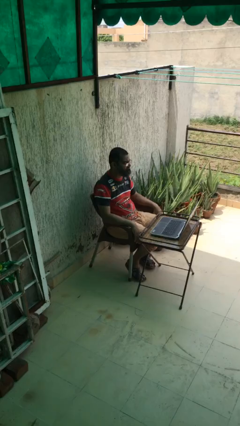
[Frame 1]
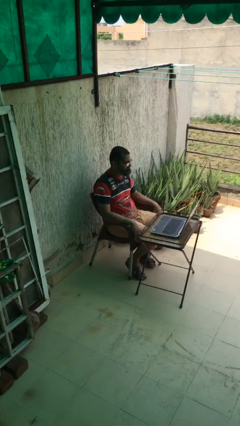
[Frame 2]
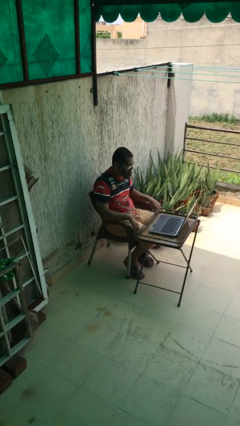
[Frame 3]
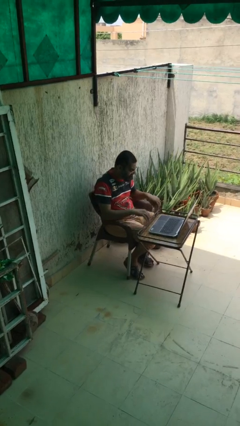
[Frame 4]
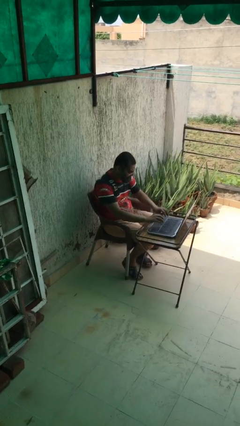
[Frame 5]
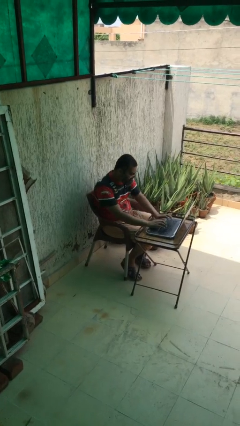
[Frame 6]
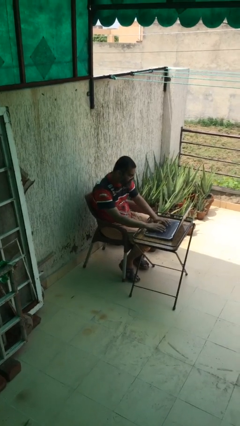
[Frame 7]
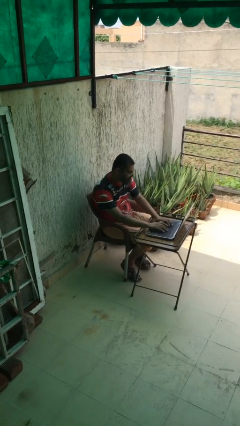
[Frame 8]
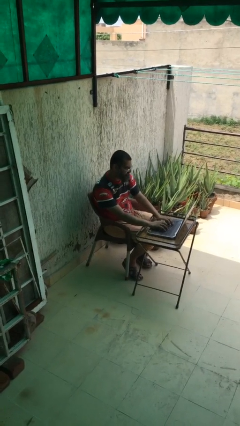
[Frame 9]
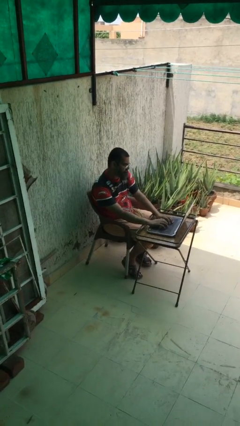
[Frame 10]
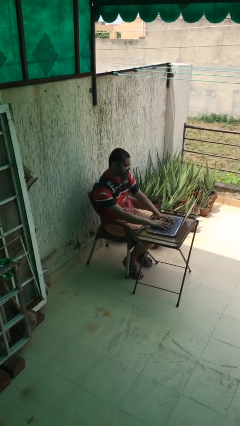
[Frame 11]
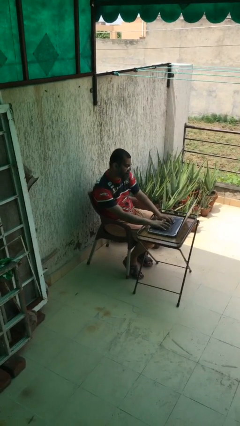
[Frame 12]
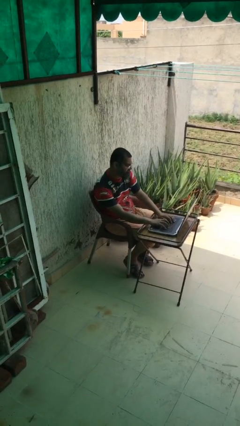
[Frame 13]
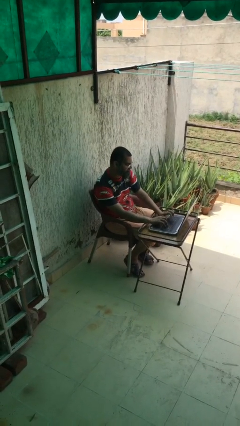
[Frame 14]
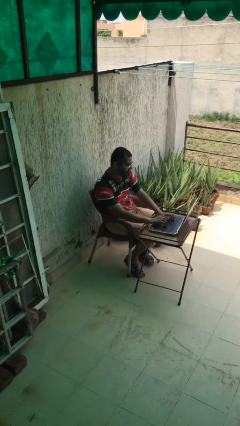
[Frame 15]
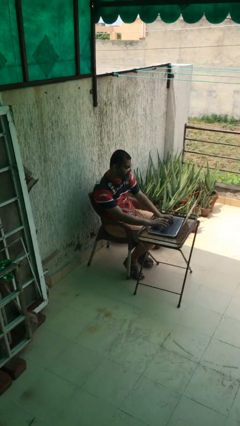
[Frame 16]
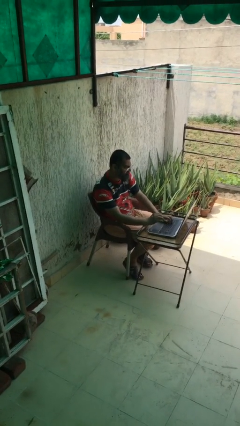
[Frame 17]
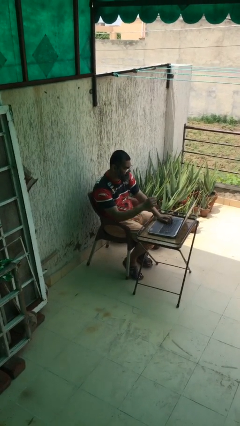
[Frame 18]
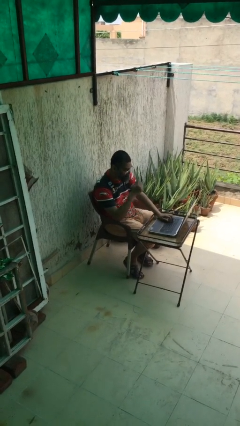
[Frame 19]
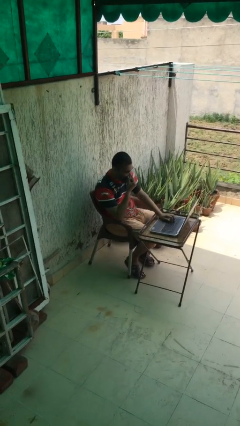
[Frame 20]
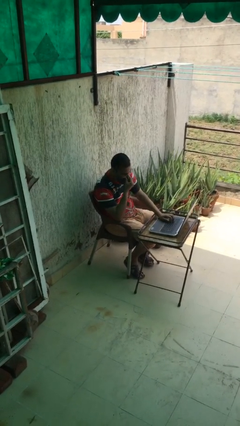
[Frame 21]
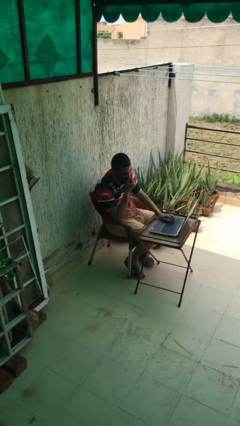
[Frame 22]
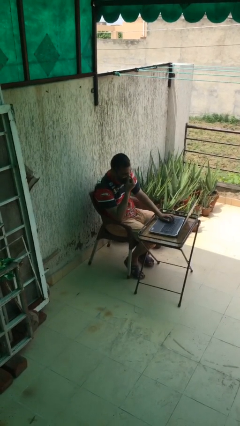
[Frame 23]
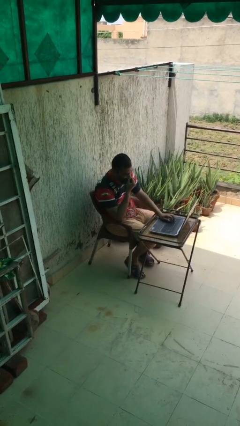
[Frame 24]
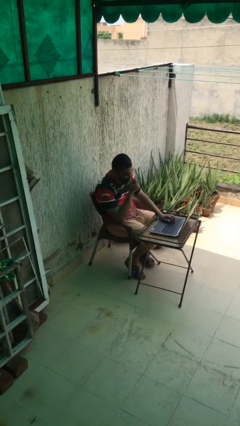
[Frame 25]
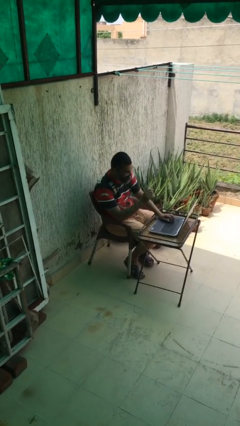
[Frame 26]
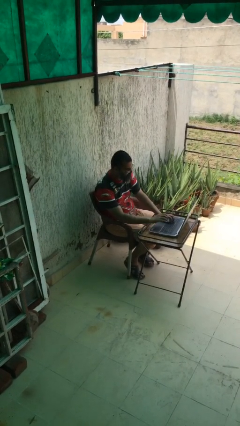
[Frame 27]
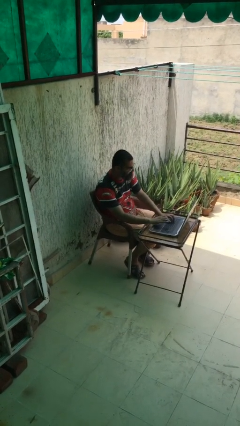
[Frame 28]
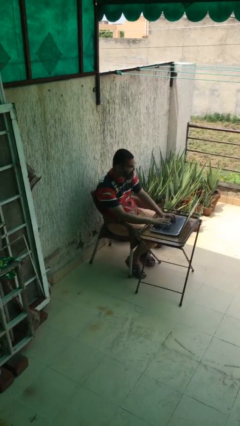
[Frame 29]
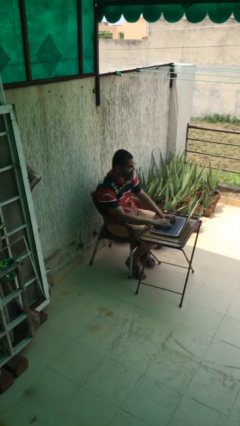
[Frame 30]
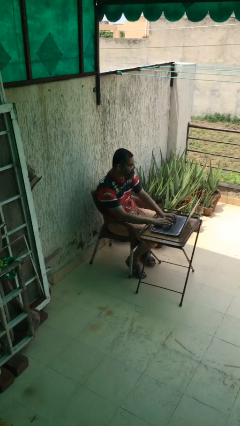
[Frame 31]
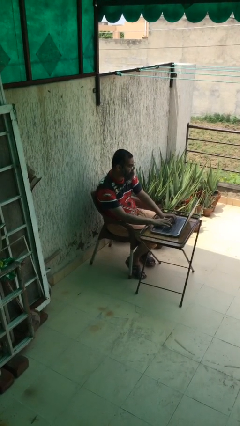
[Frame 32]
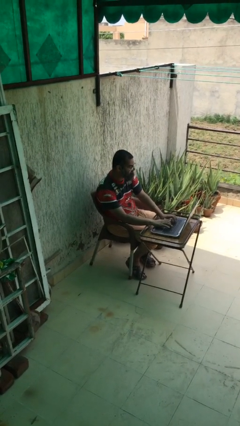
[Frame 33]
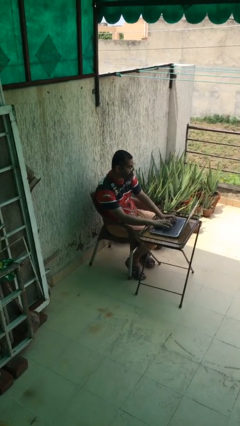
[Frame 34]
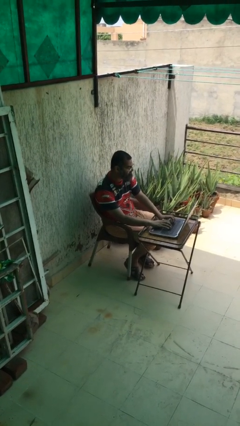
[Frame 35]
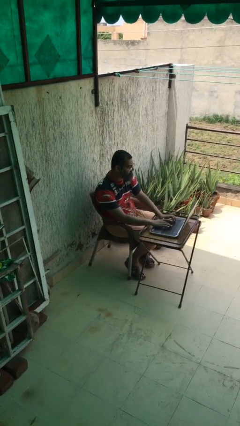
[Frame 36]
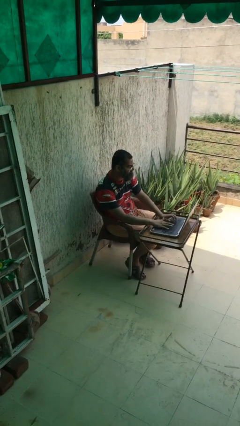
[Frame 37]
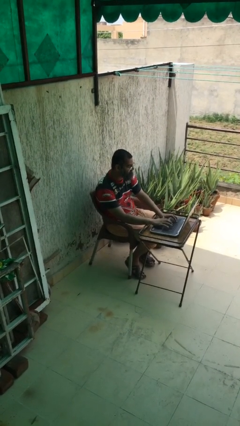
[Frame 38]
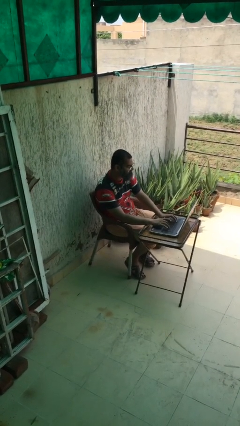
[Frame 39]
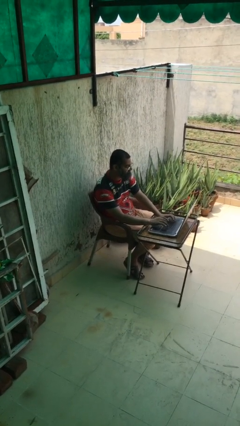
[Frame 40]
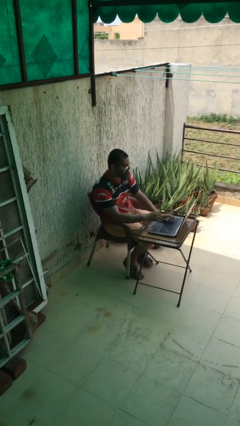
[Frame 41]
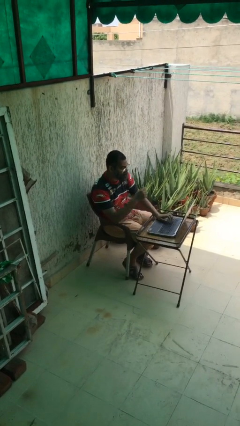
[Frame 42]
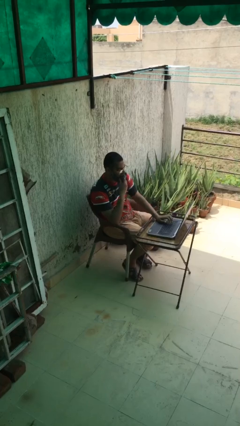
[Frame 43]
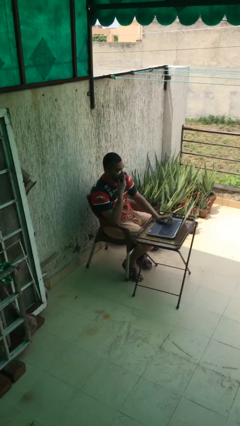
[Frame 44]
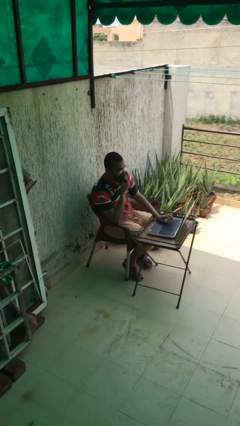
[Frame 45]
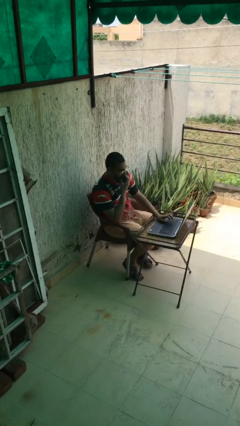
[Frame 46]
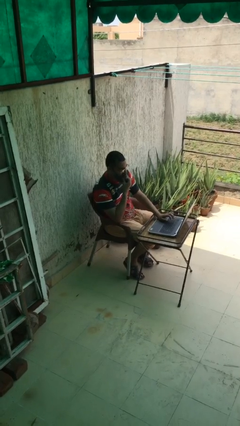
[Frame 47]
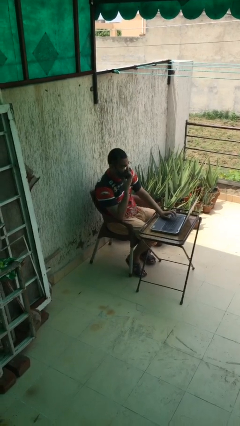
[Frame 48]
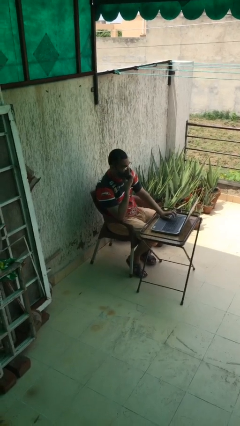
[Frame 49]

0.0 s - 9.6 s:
person interacts with laptop

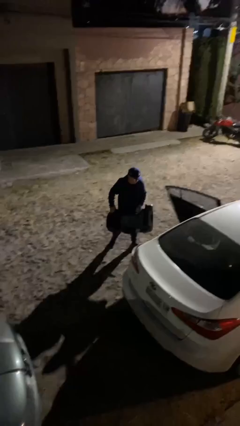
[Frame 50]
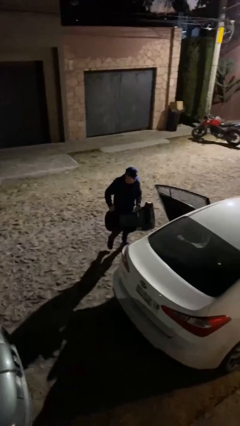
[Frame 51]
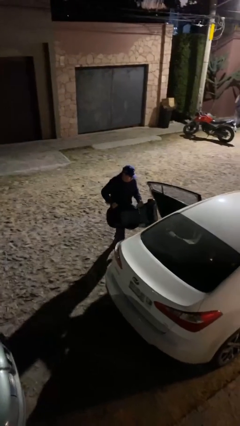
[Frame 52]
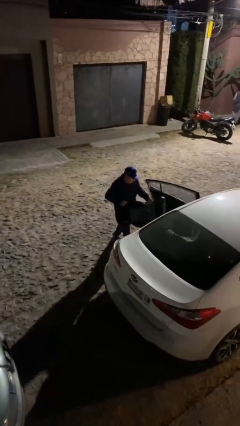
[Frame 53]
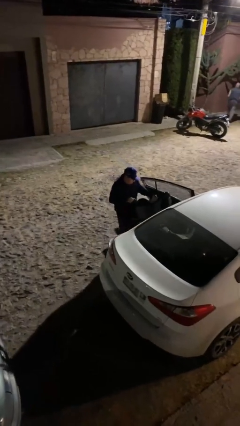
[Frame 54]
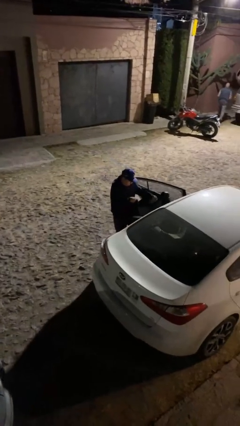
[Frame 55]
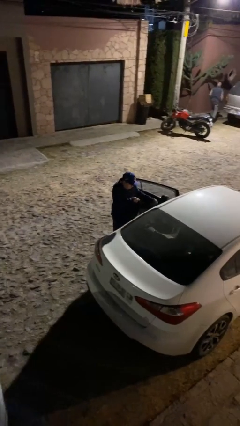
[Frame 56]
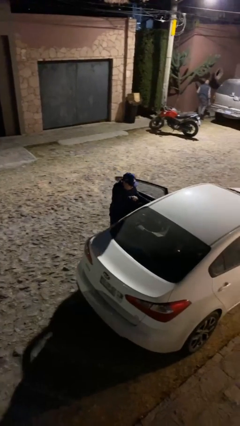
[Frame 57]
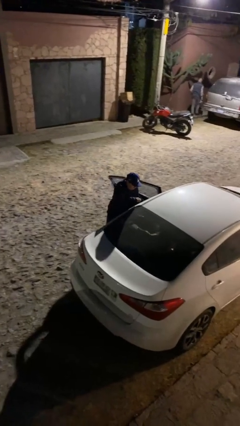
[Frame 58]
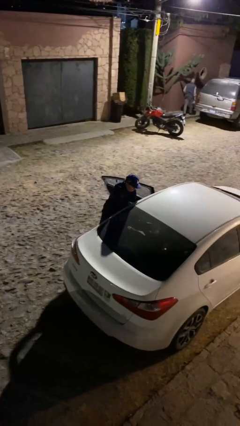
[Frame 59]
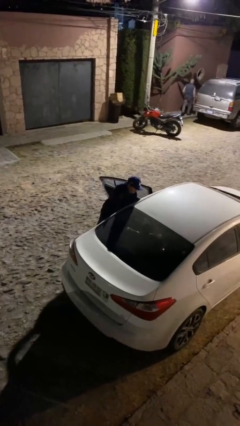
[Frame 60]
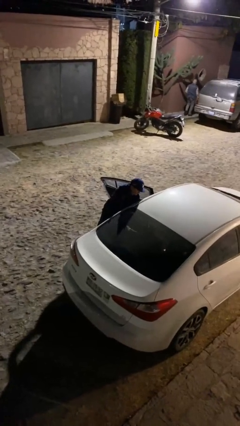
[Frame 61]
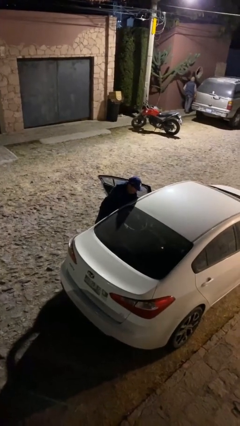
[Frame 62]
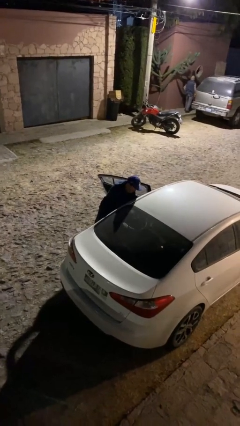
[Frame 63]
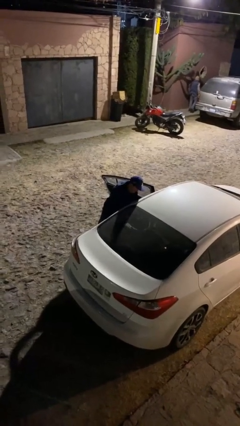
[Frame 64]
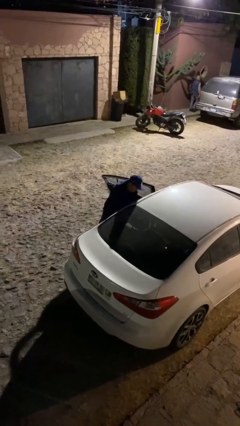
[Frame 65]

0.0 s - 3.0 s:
person loads car

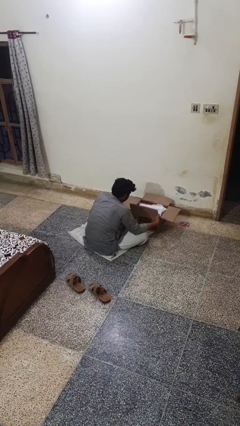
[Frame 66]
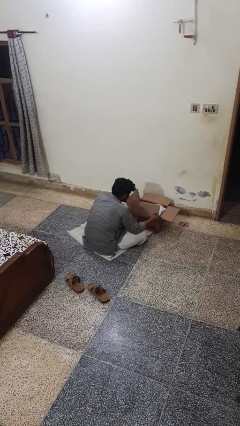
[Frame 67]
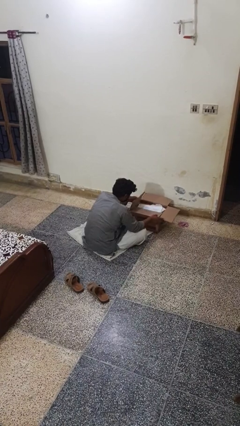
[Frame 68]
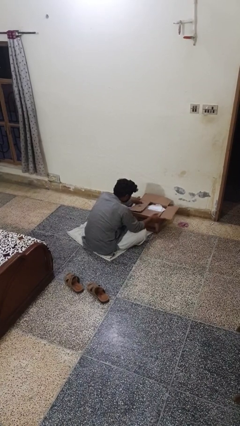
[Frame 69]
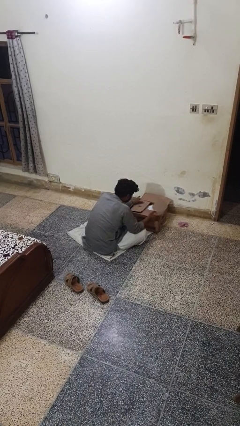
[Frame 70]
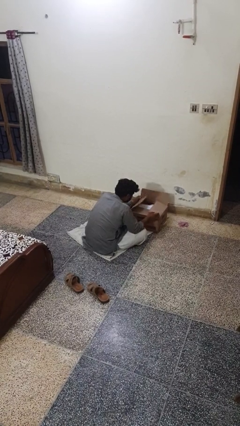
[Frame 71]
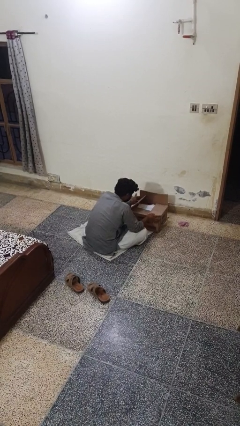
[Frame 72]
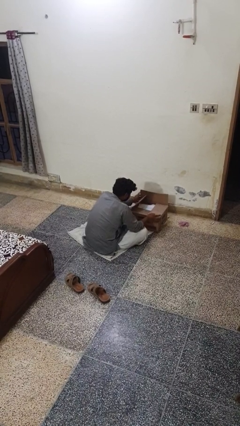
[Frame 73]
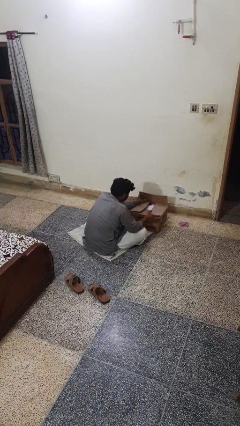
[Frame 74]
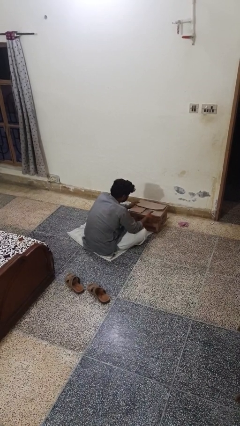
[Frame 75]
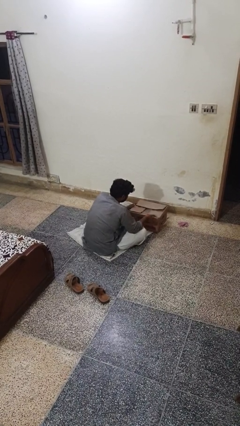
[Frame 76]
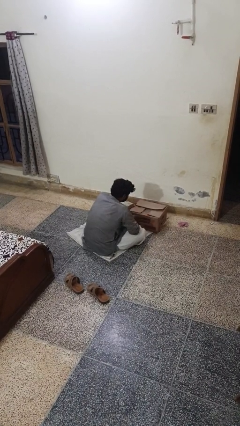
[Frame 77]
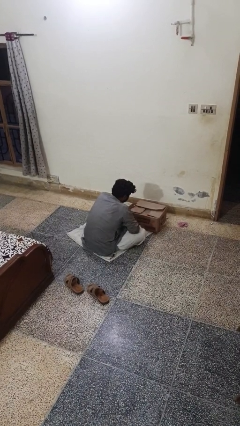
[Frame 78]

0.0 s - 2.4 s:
person closes box

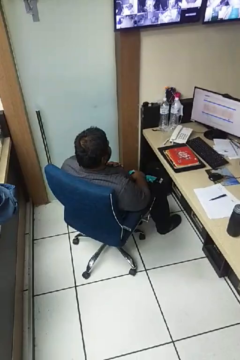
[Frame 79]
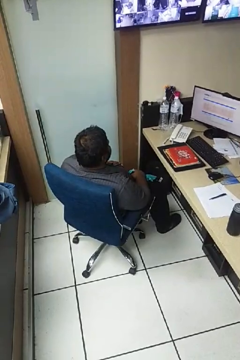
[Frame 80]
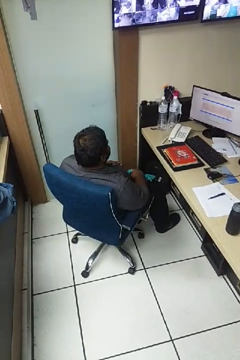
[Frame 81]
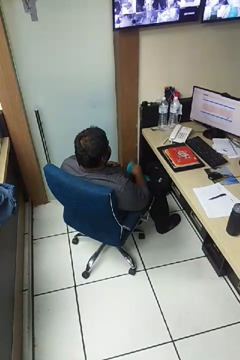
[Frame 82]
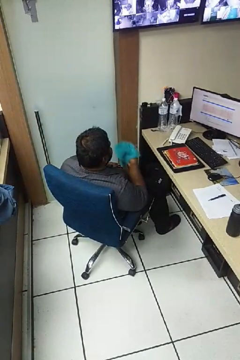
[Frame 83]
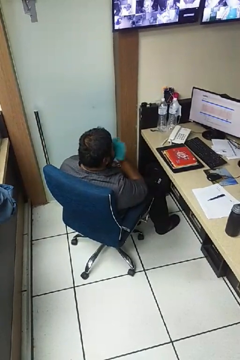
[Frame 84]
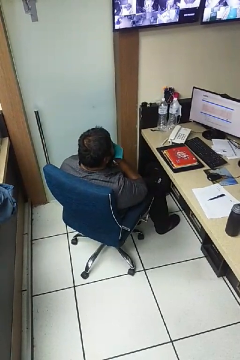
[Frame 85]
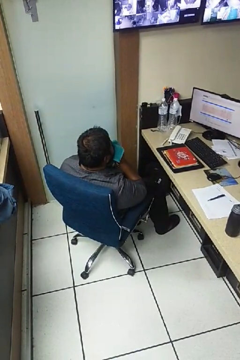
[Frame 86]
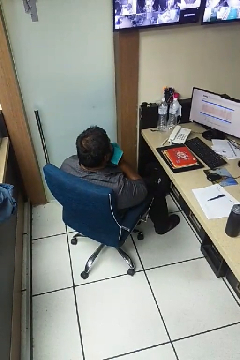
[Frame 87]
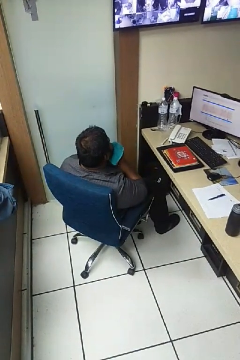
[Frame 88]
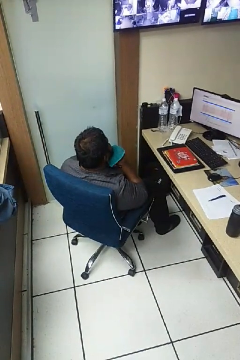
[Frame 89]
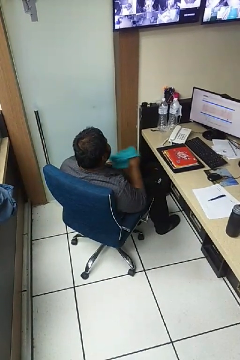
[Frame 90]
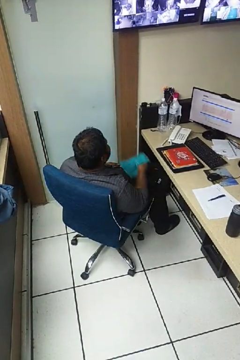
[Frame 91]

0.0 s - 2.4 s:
person wipes mouth with napkin

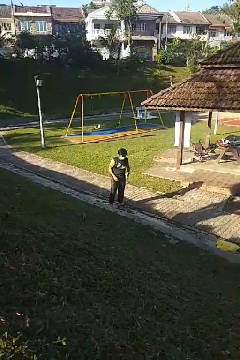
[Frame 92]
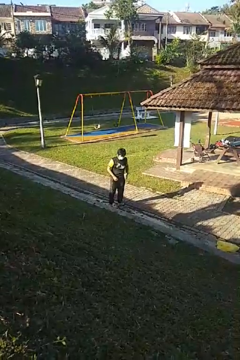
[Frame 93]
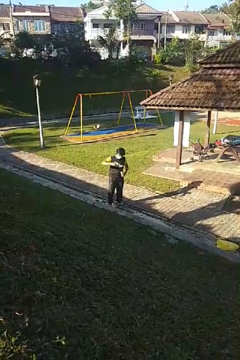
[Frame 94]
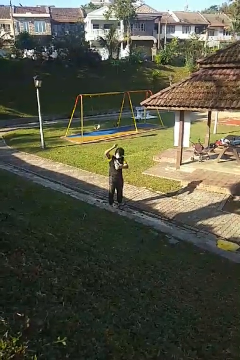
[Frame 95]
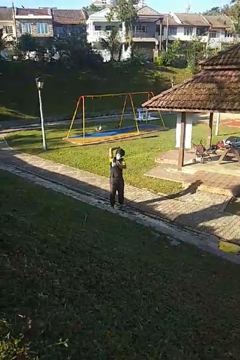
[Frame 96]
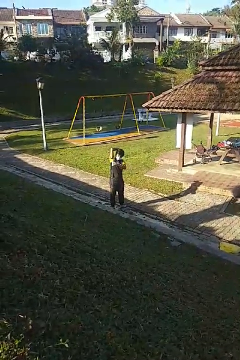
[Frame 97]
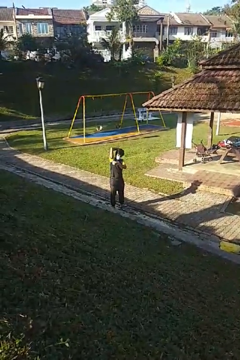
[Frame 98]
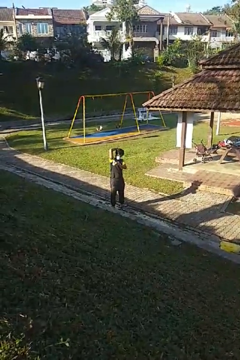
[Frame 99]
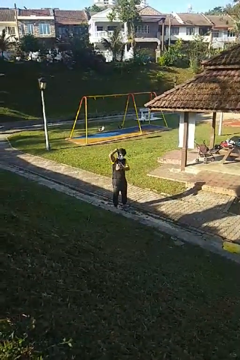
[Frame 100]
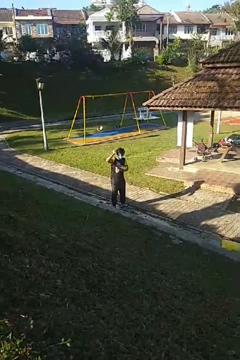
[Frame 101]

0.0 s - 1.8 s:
person applies deodorant
